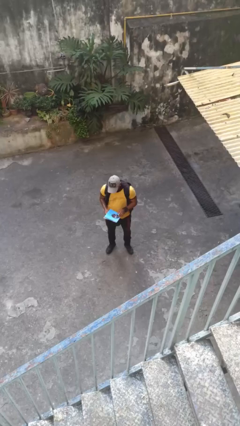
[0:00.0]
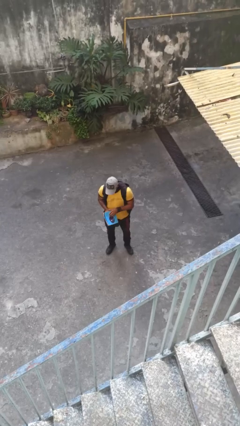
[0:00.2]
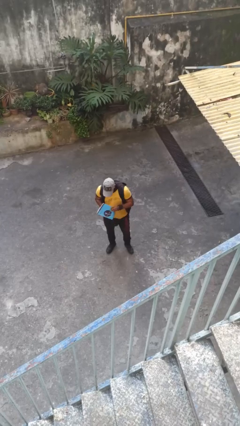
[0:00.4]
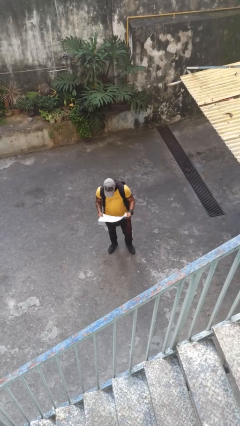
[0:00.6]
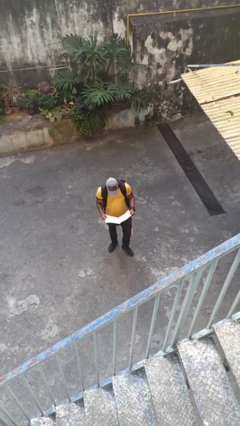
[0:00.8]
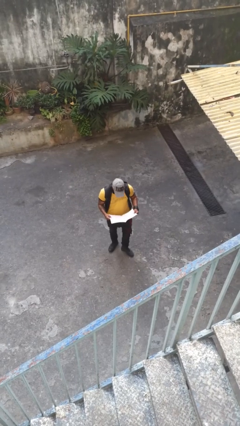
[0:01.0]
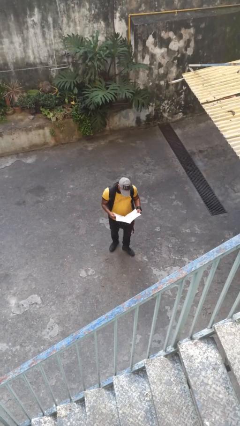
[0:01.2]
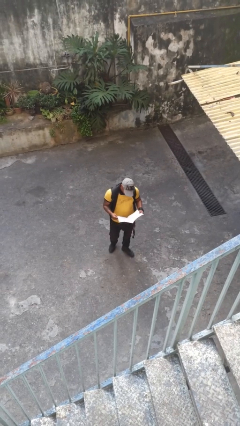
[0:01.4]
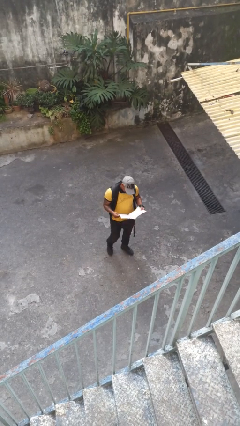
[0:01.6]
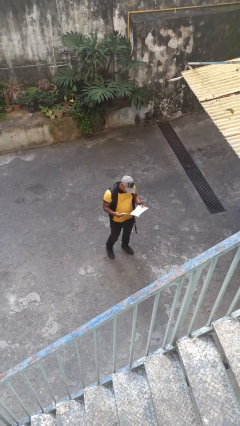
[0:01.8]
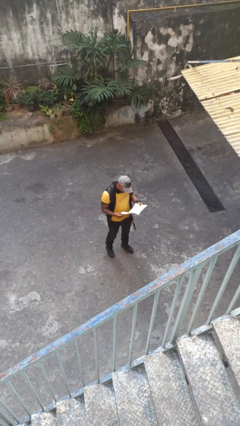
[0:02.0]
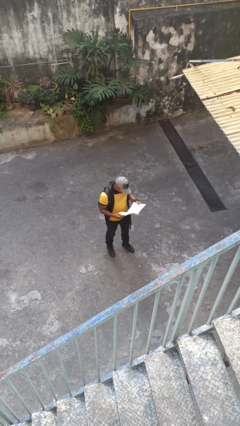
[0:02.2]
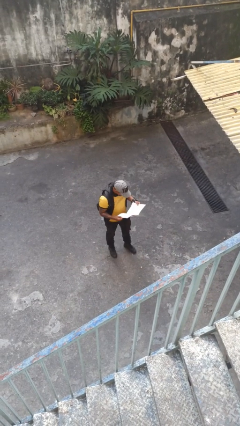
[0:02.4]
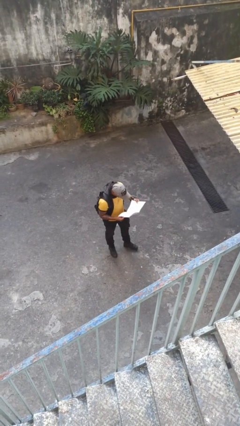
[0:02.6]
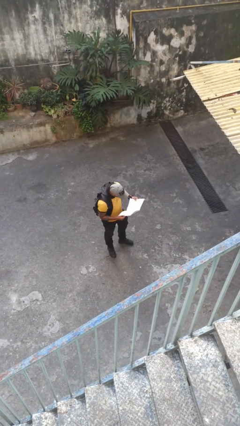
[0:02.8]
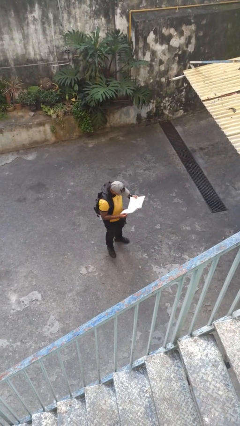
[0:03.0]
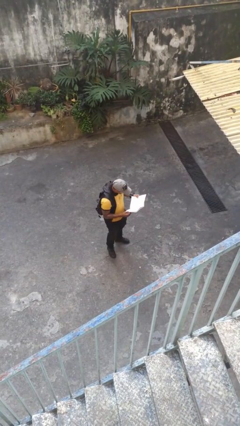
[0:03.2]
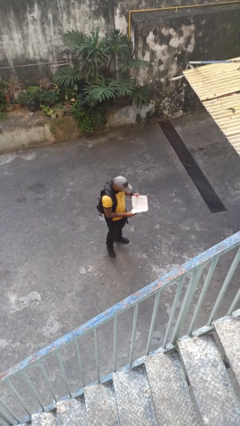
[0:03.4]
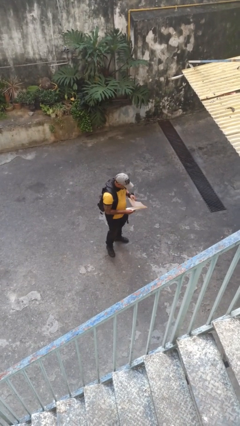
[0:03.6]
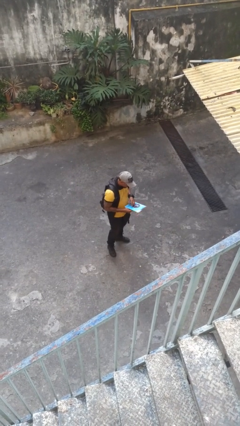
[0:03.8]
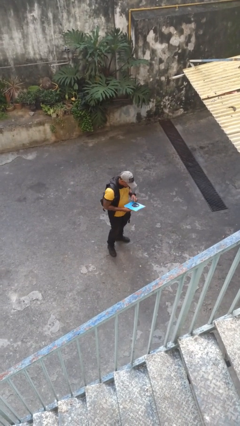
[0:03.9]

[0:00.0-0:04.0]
person reads document

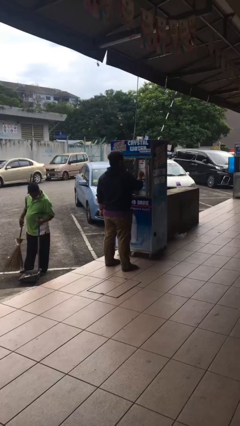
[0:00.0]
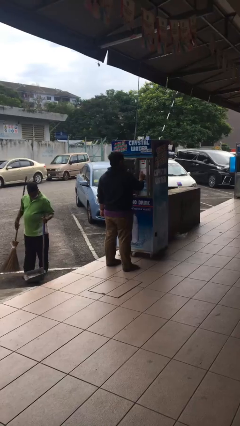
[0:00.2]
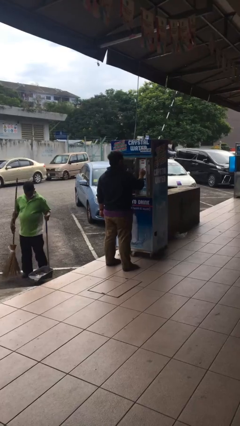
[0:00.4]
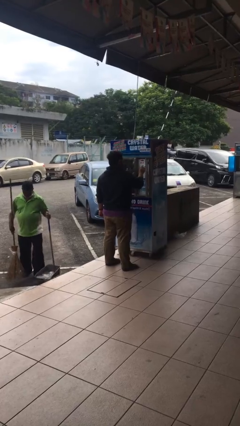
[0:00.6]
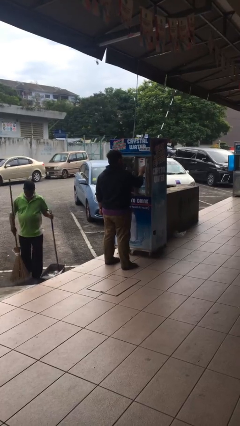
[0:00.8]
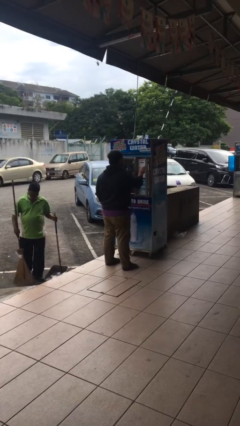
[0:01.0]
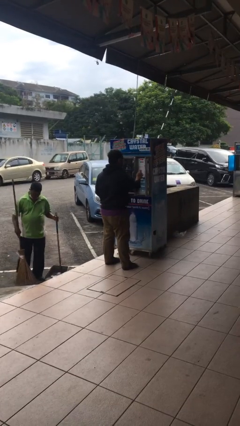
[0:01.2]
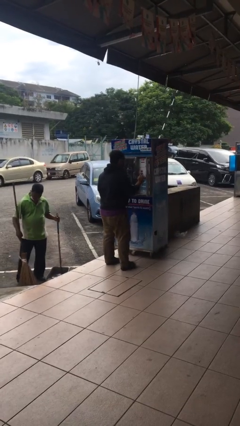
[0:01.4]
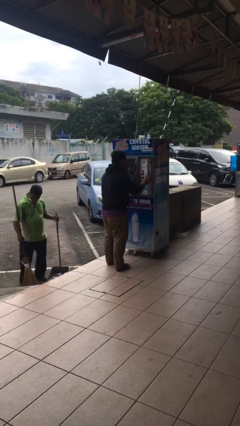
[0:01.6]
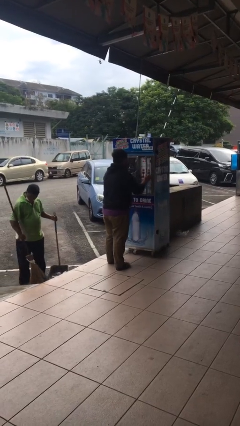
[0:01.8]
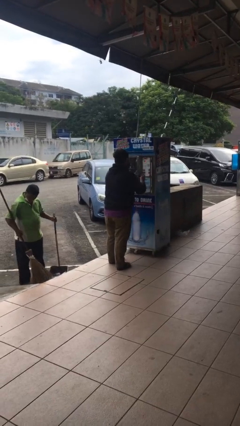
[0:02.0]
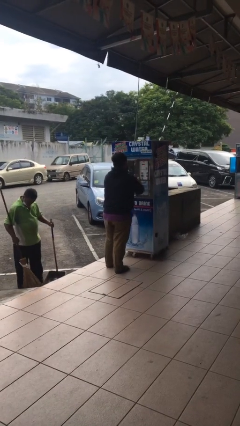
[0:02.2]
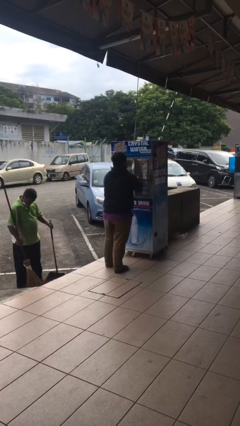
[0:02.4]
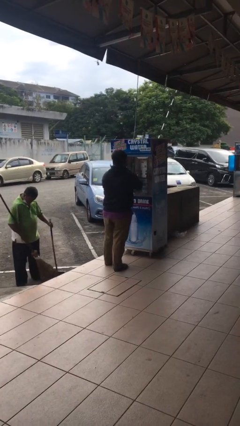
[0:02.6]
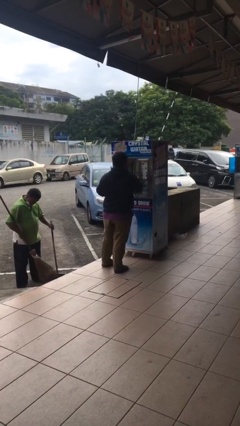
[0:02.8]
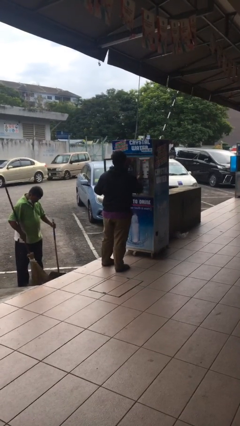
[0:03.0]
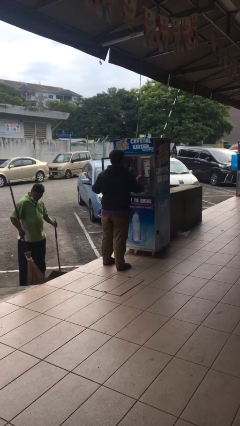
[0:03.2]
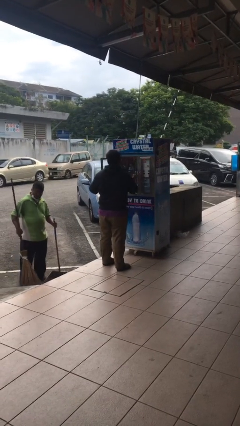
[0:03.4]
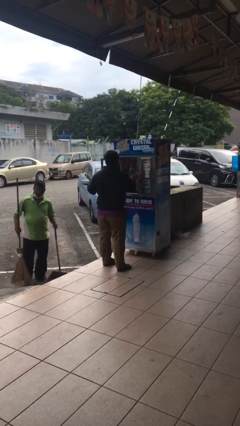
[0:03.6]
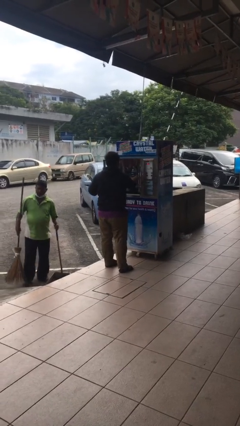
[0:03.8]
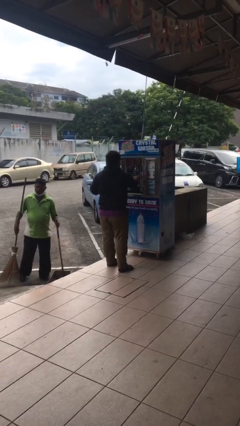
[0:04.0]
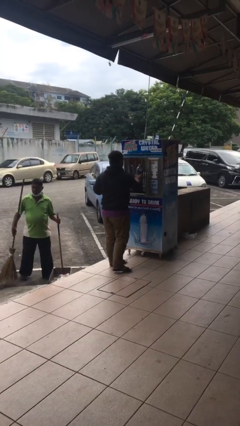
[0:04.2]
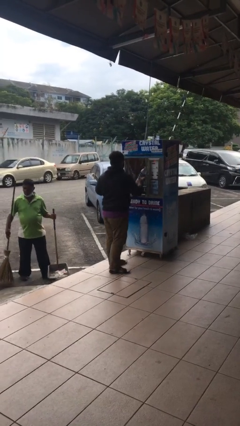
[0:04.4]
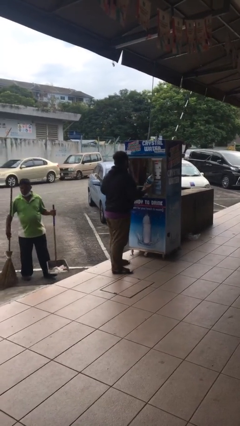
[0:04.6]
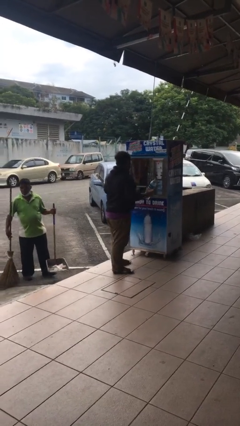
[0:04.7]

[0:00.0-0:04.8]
person purchases from machine

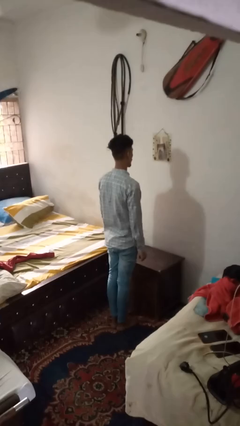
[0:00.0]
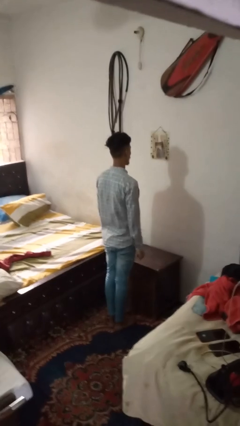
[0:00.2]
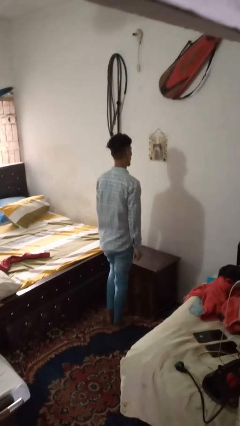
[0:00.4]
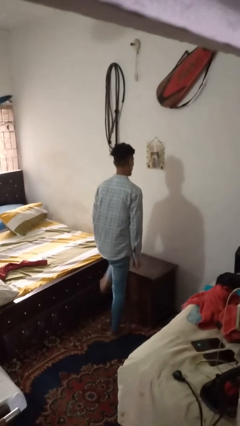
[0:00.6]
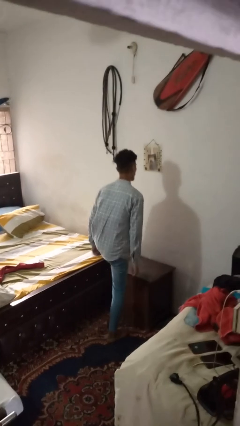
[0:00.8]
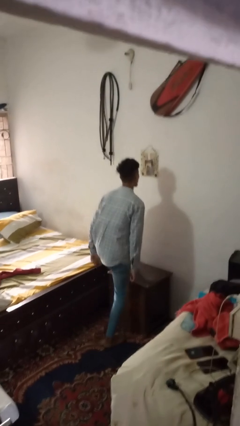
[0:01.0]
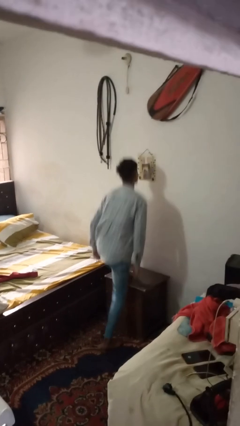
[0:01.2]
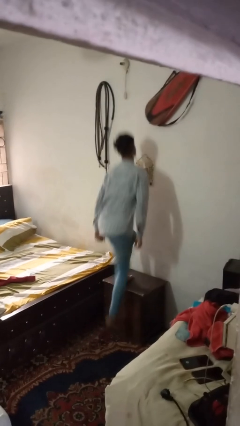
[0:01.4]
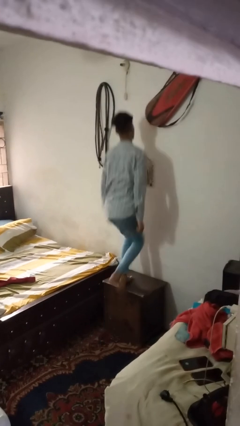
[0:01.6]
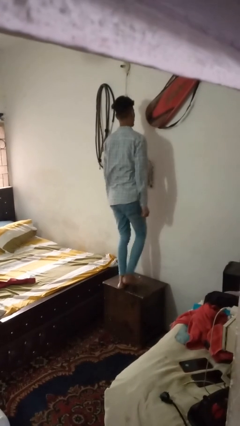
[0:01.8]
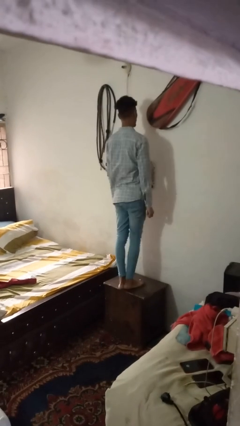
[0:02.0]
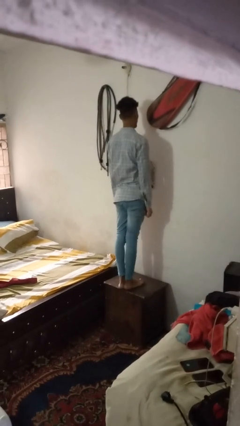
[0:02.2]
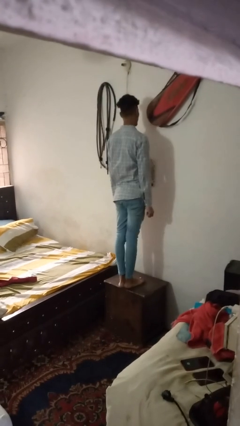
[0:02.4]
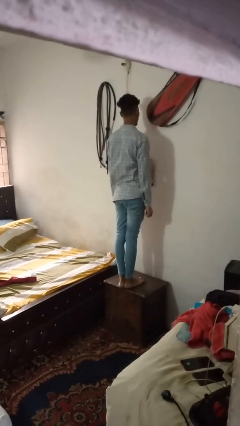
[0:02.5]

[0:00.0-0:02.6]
person climbs on table

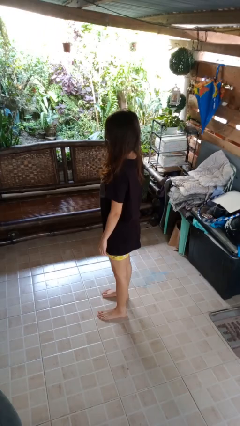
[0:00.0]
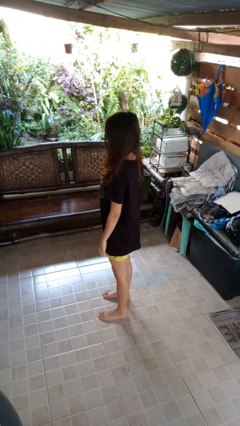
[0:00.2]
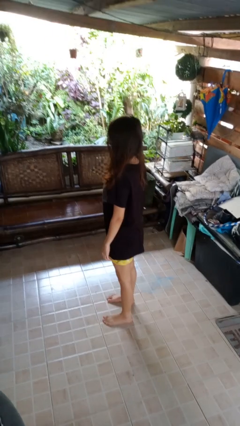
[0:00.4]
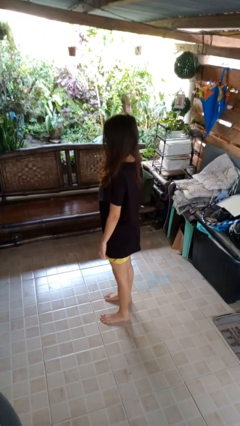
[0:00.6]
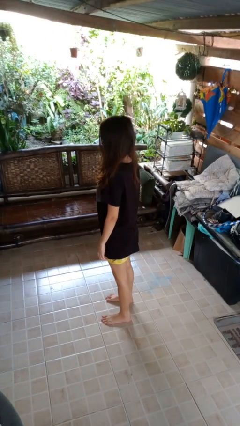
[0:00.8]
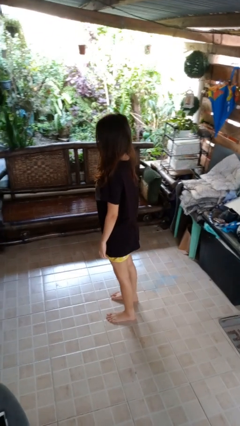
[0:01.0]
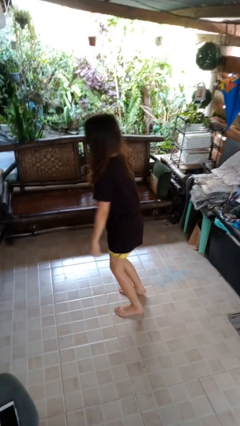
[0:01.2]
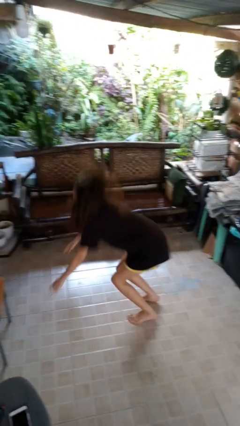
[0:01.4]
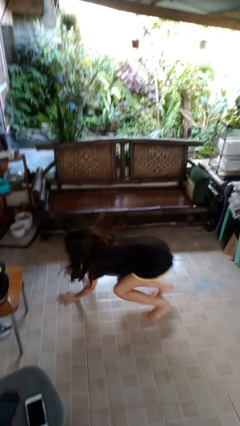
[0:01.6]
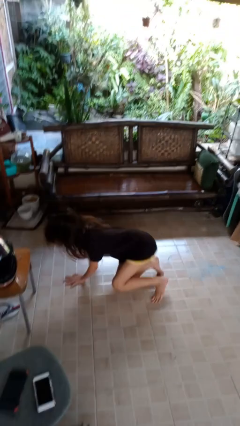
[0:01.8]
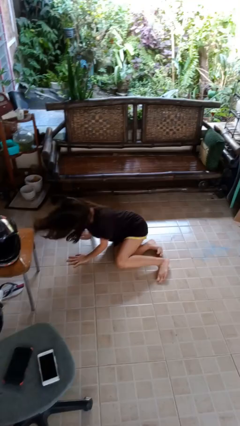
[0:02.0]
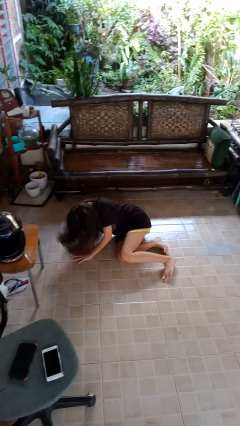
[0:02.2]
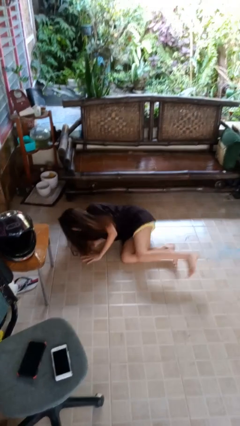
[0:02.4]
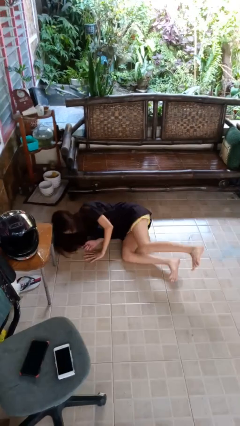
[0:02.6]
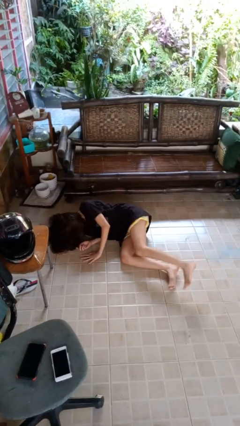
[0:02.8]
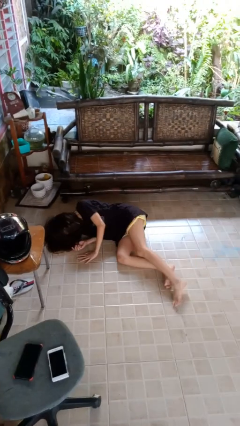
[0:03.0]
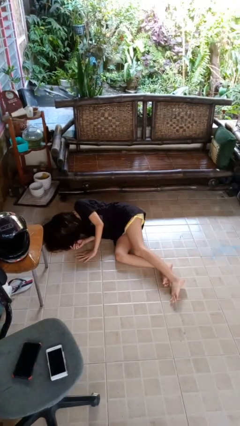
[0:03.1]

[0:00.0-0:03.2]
person falls while standing

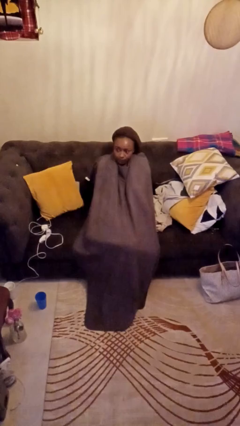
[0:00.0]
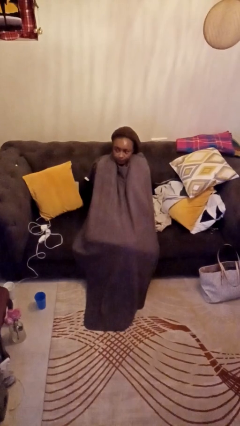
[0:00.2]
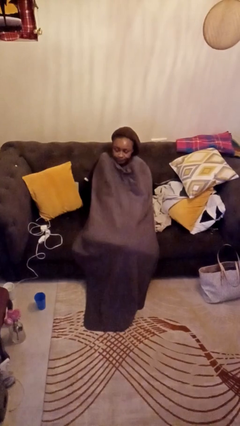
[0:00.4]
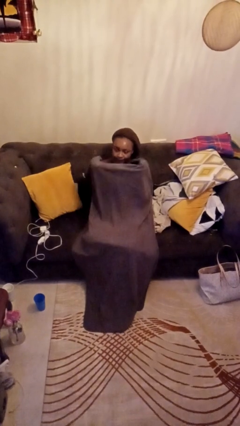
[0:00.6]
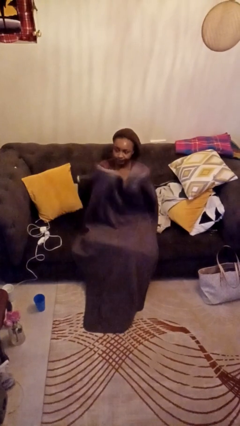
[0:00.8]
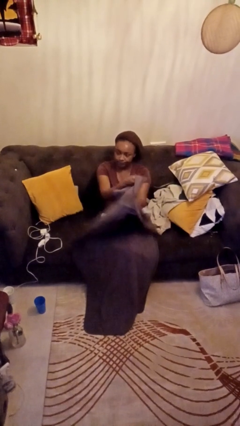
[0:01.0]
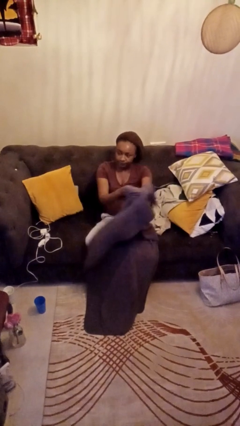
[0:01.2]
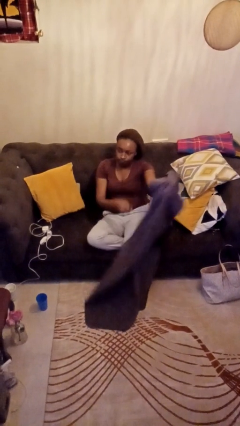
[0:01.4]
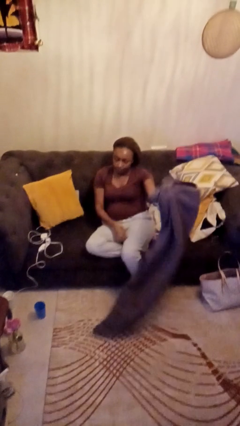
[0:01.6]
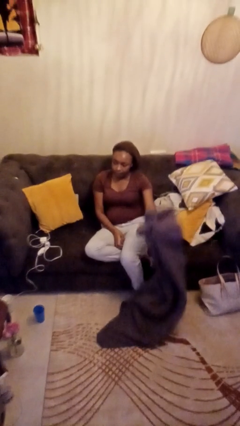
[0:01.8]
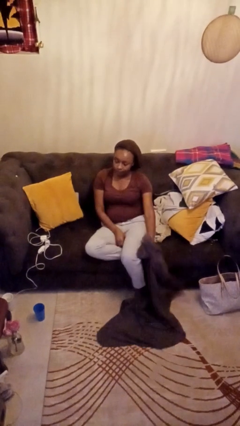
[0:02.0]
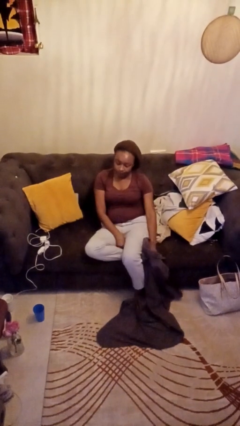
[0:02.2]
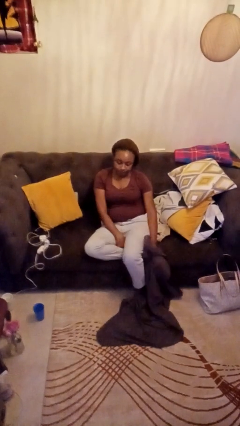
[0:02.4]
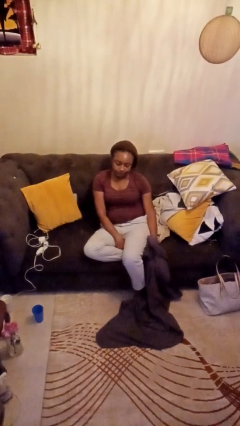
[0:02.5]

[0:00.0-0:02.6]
person uncovers with blanket
